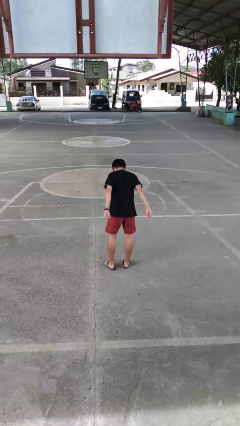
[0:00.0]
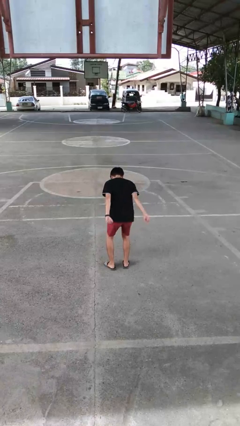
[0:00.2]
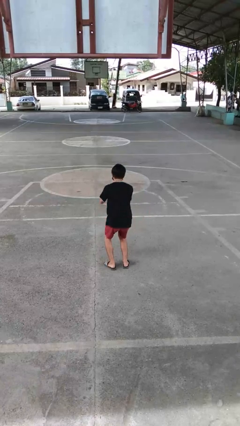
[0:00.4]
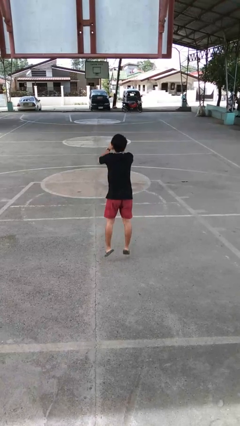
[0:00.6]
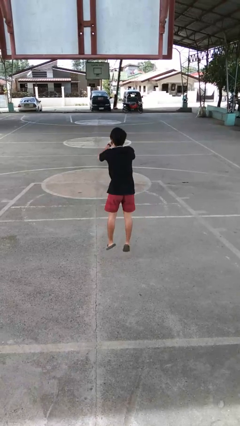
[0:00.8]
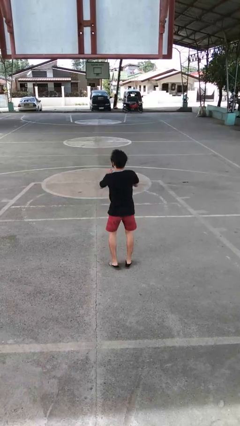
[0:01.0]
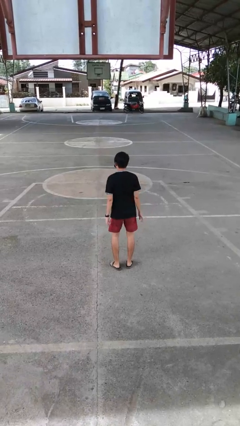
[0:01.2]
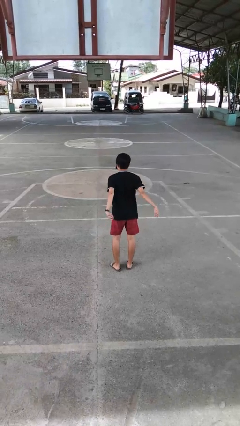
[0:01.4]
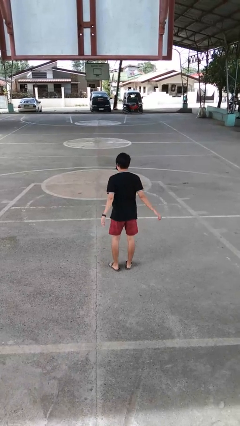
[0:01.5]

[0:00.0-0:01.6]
person jumps

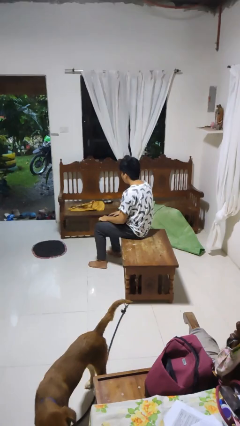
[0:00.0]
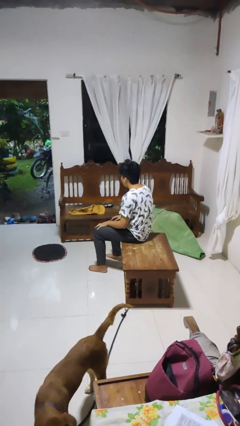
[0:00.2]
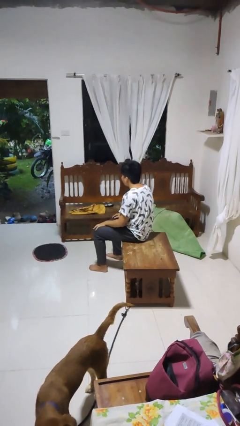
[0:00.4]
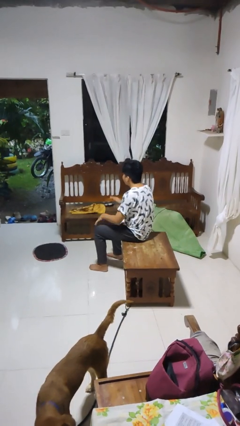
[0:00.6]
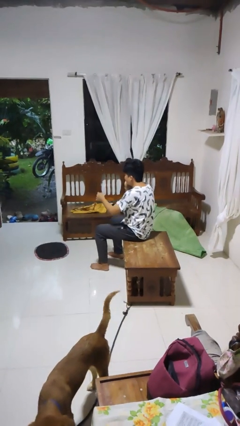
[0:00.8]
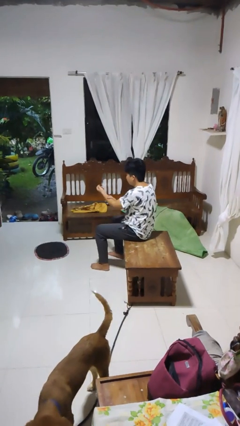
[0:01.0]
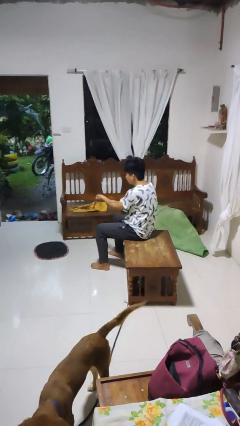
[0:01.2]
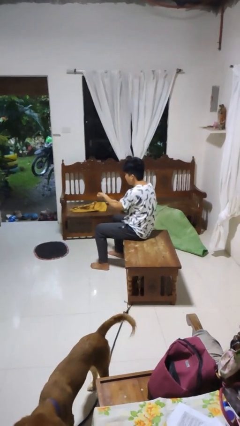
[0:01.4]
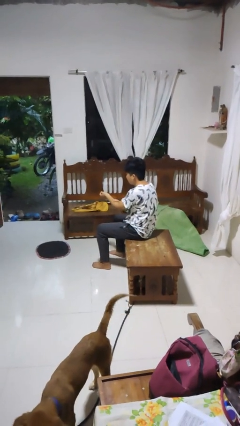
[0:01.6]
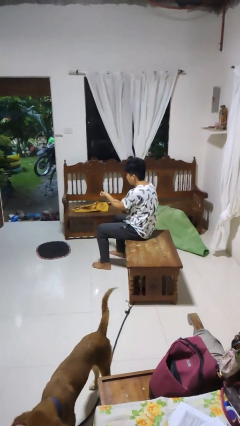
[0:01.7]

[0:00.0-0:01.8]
person swats bug

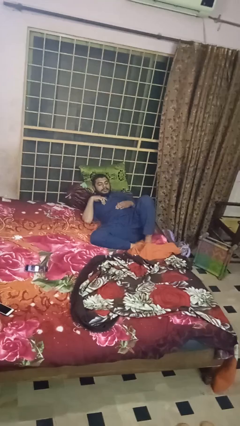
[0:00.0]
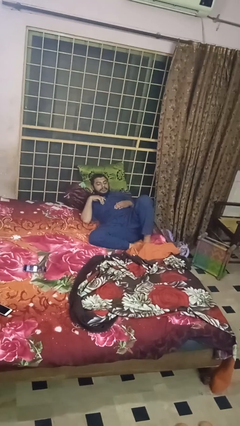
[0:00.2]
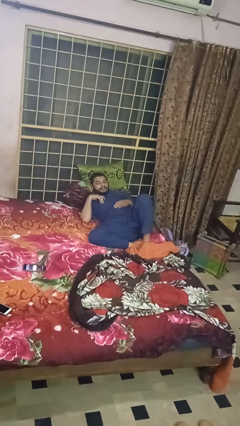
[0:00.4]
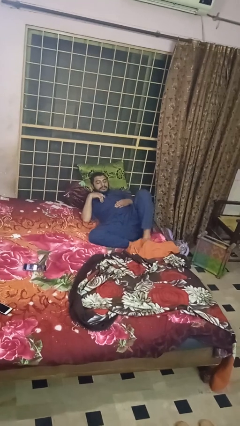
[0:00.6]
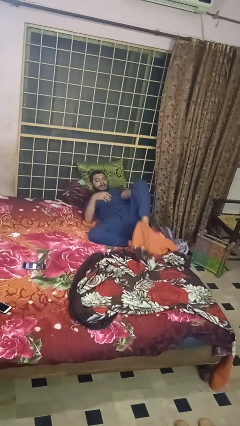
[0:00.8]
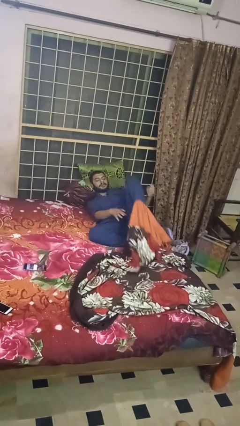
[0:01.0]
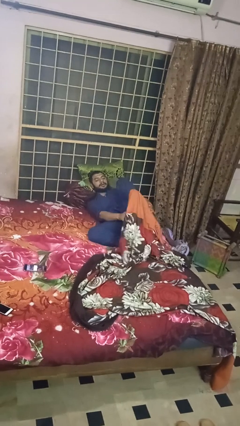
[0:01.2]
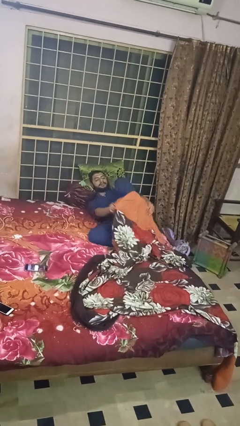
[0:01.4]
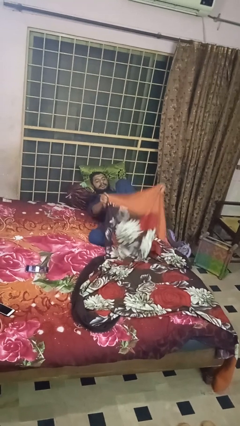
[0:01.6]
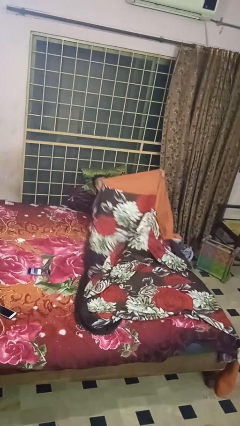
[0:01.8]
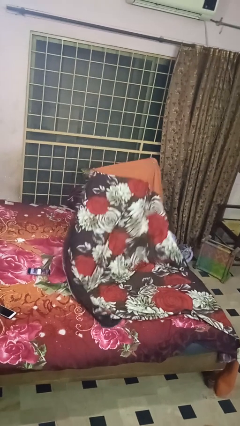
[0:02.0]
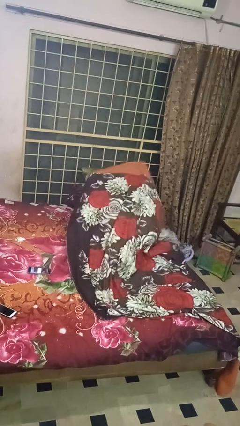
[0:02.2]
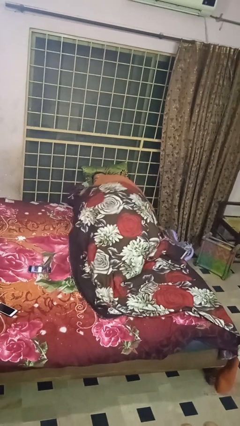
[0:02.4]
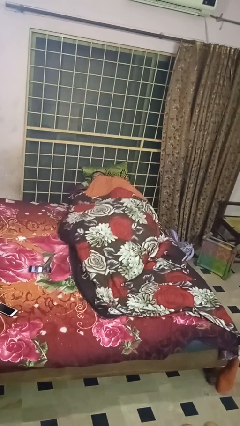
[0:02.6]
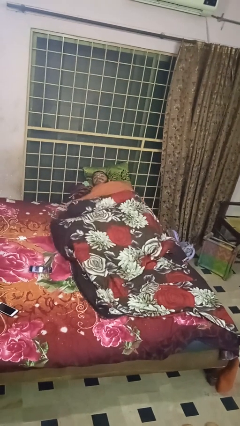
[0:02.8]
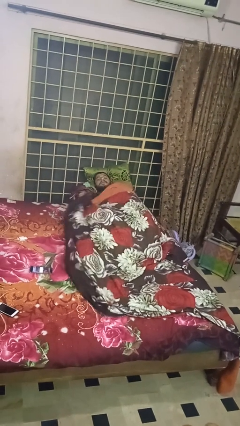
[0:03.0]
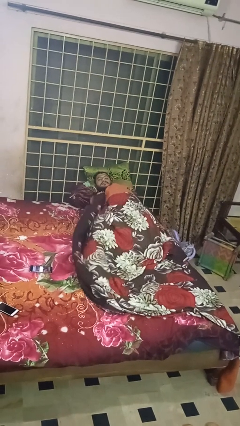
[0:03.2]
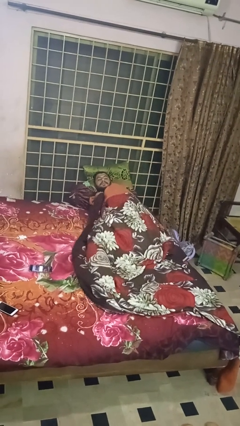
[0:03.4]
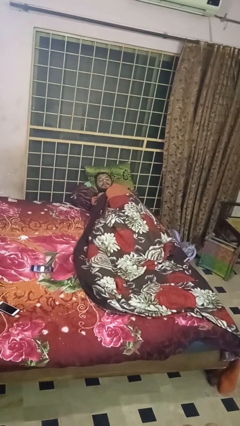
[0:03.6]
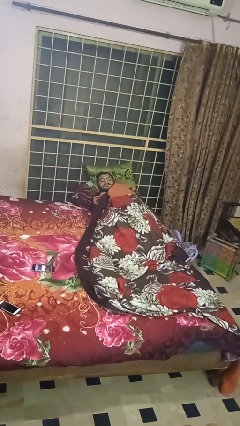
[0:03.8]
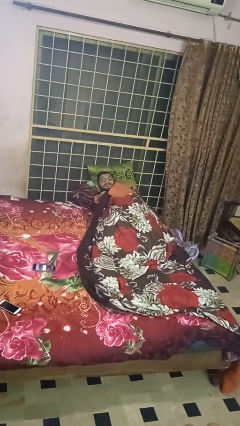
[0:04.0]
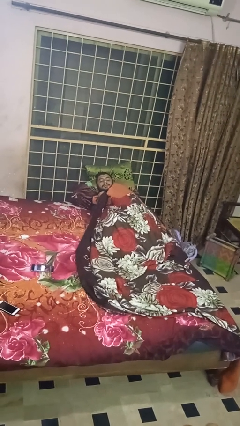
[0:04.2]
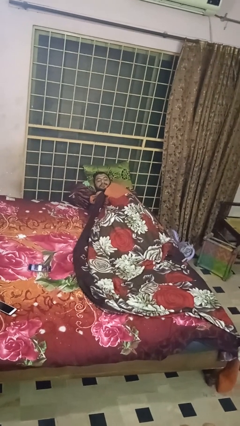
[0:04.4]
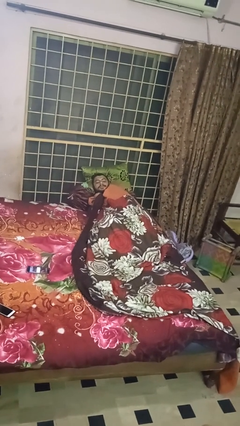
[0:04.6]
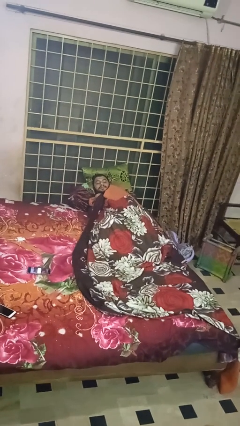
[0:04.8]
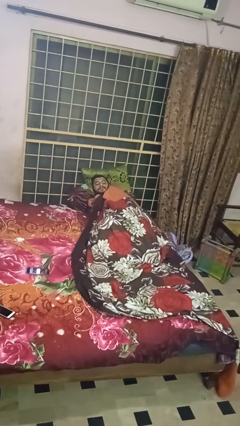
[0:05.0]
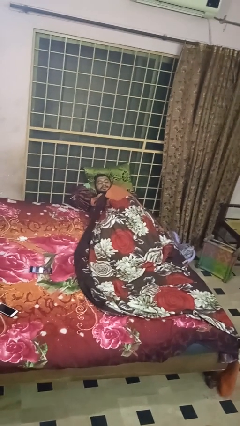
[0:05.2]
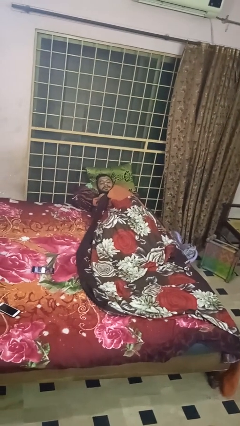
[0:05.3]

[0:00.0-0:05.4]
person covers with bedsheets

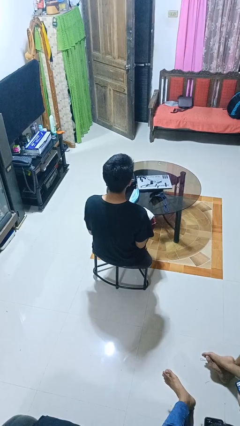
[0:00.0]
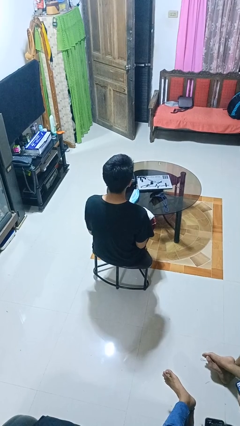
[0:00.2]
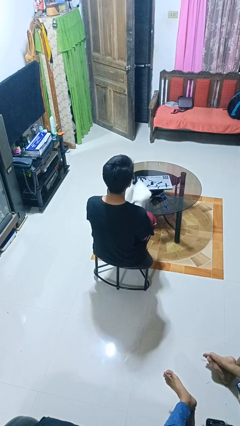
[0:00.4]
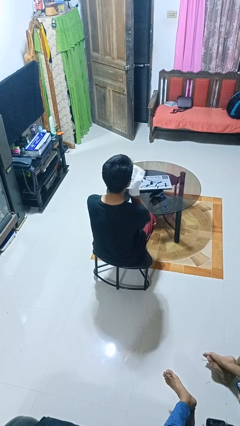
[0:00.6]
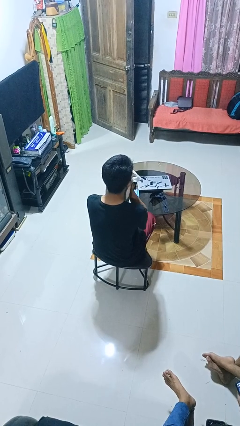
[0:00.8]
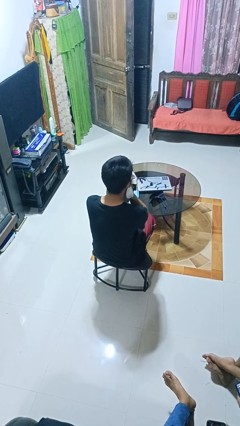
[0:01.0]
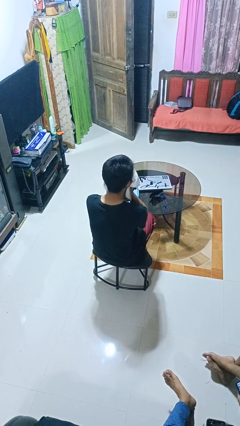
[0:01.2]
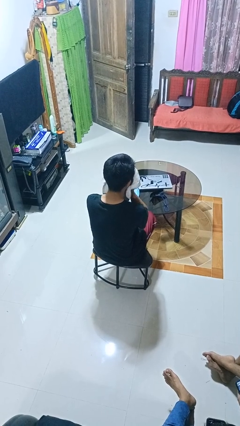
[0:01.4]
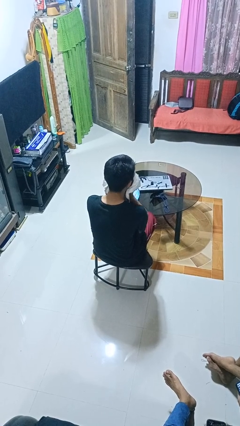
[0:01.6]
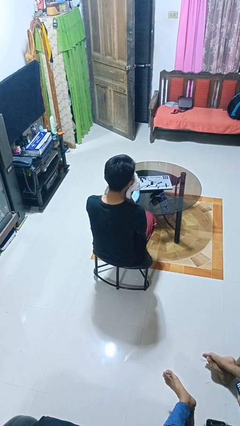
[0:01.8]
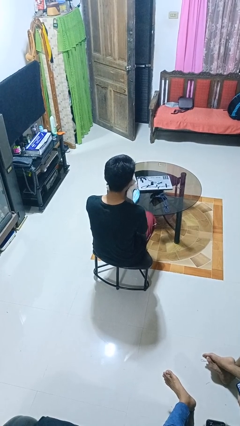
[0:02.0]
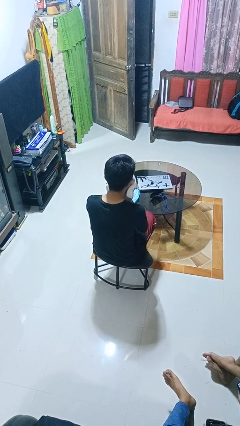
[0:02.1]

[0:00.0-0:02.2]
person wipes mouth with napkin

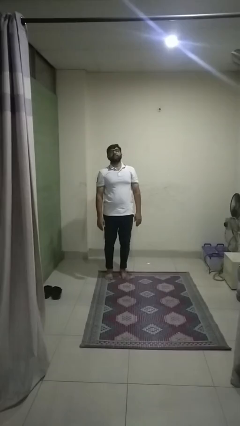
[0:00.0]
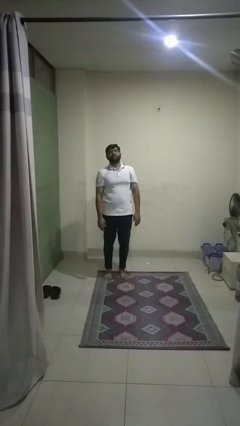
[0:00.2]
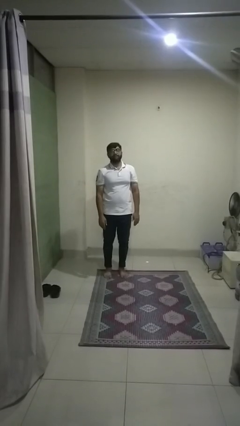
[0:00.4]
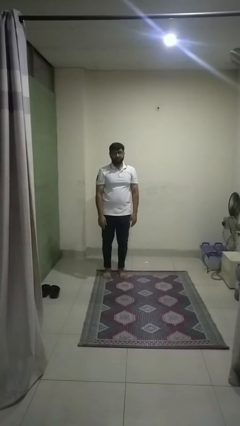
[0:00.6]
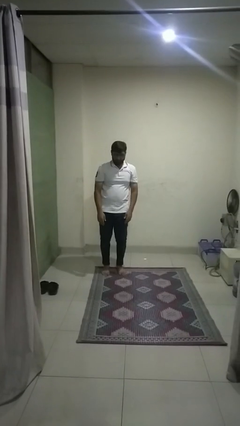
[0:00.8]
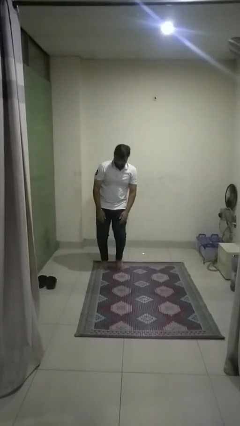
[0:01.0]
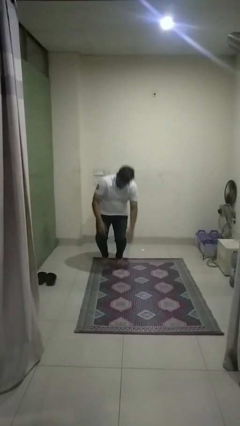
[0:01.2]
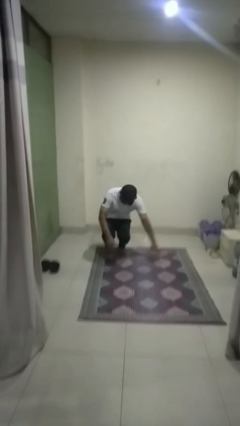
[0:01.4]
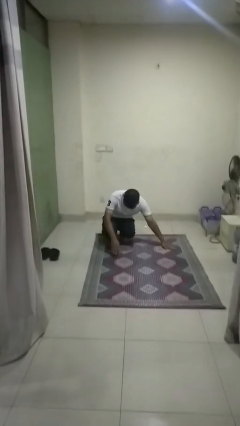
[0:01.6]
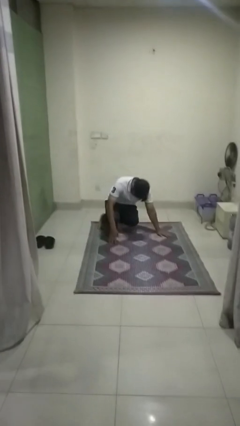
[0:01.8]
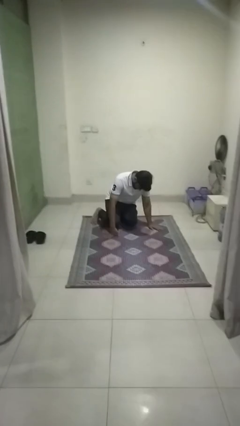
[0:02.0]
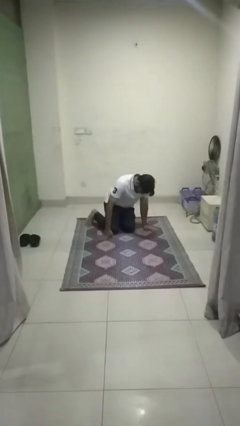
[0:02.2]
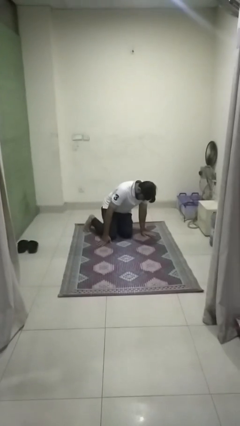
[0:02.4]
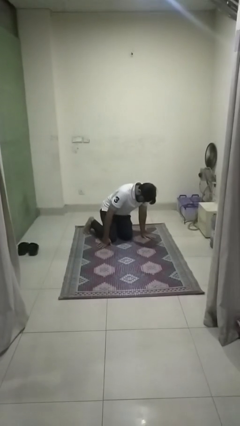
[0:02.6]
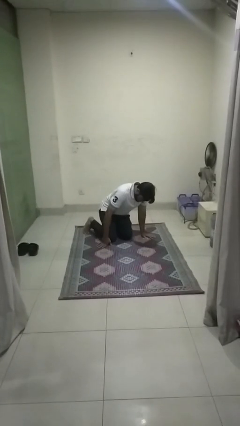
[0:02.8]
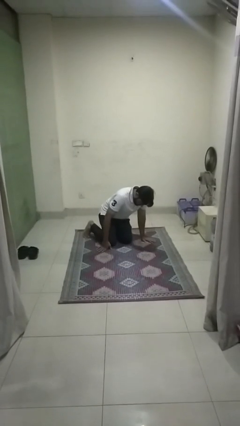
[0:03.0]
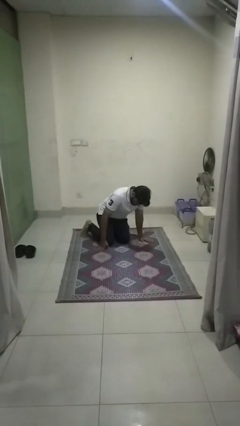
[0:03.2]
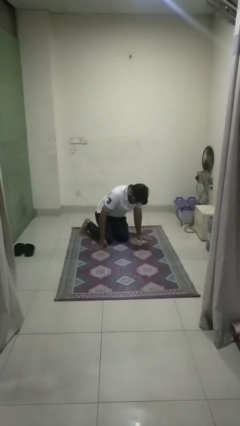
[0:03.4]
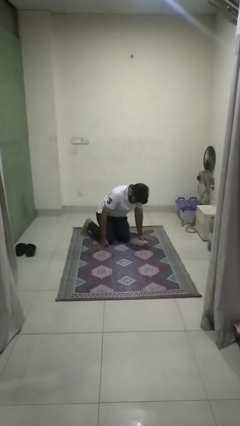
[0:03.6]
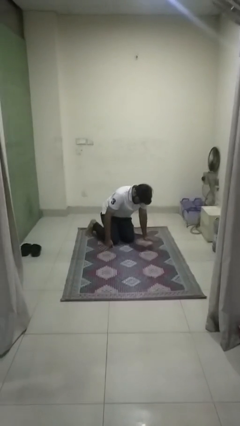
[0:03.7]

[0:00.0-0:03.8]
person falls while standing

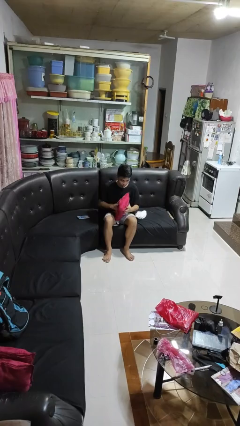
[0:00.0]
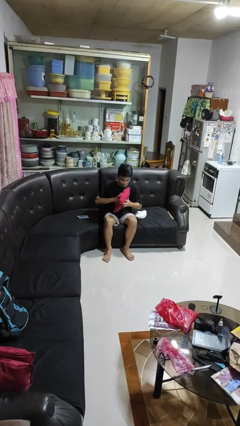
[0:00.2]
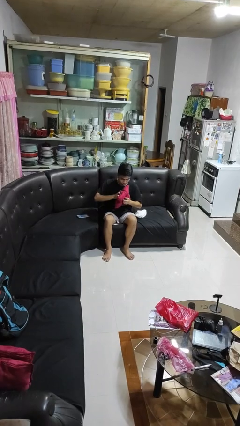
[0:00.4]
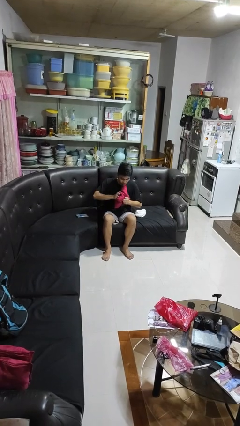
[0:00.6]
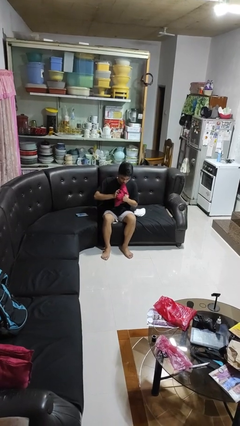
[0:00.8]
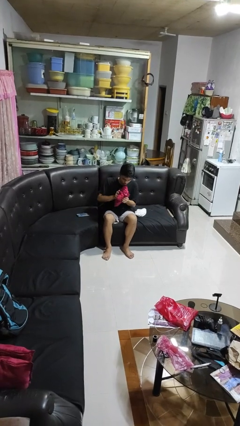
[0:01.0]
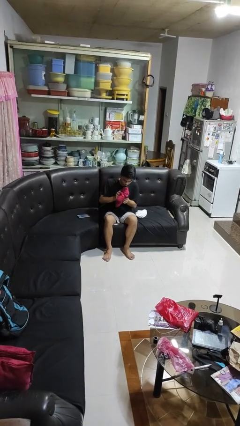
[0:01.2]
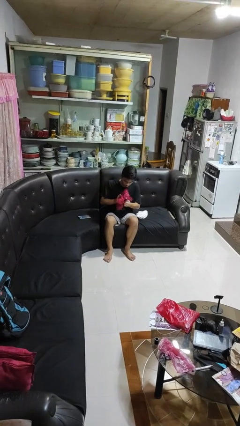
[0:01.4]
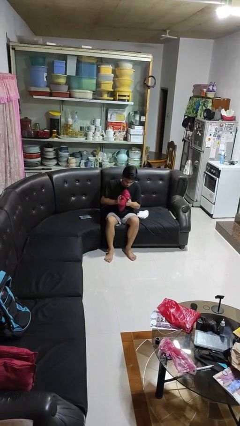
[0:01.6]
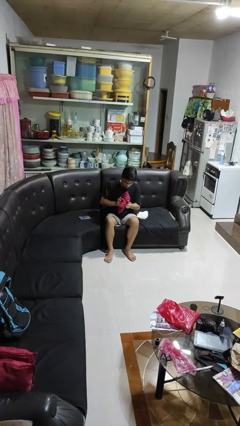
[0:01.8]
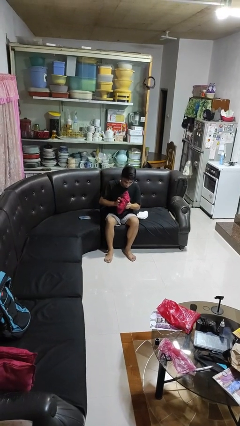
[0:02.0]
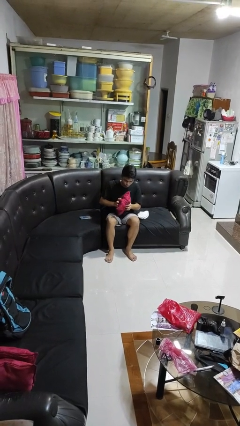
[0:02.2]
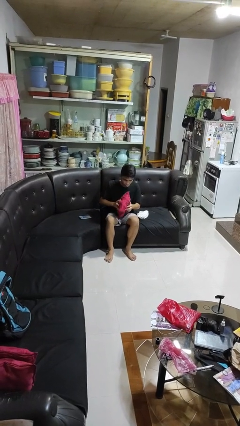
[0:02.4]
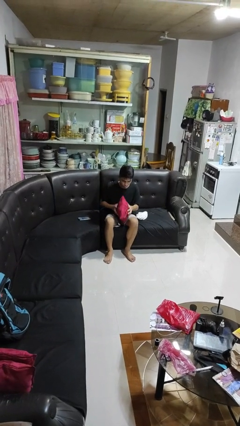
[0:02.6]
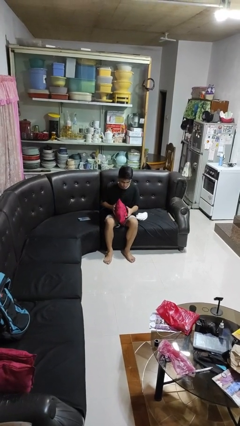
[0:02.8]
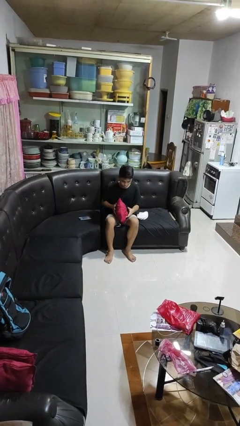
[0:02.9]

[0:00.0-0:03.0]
person squeezes object
